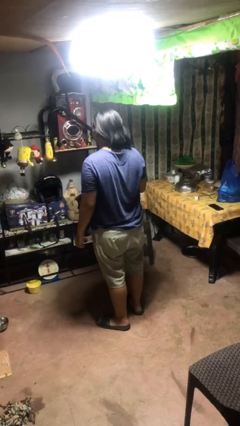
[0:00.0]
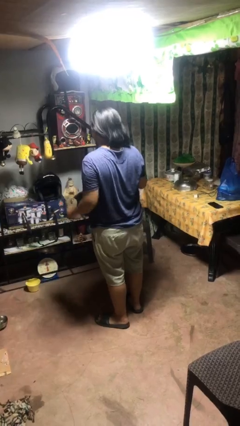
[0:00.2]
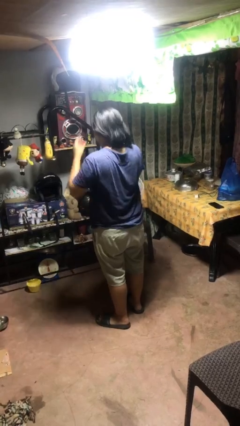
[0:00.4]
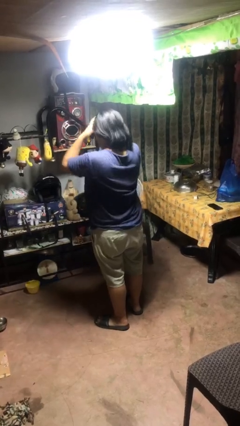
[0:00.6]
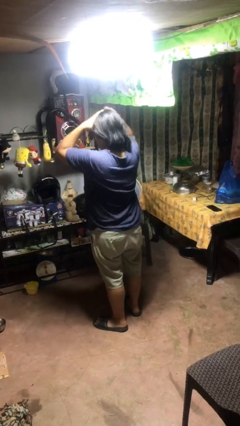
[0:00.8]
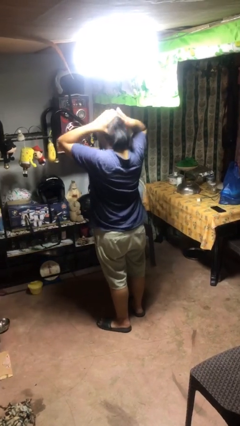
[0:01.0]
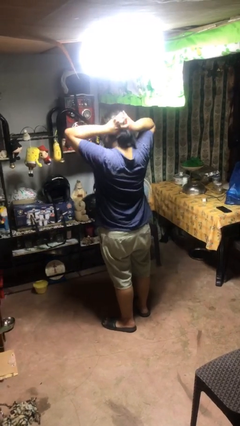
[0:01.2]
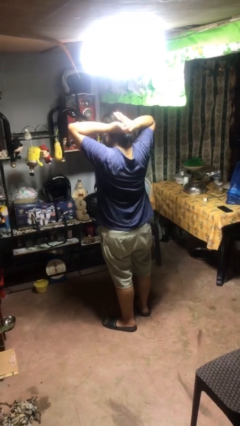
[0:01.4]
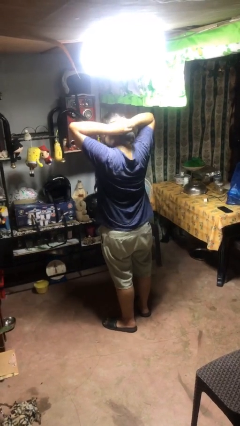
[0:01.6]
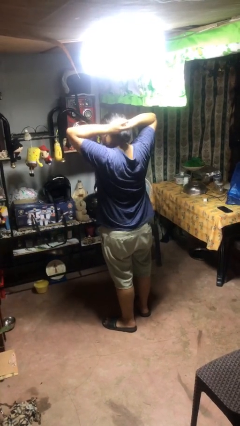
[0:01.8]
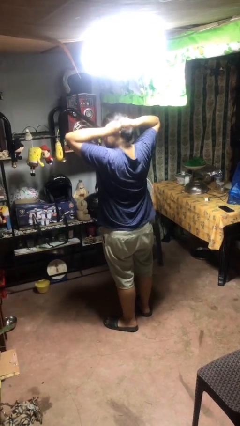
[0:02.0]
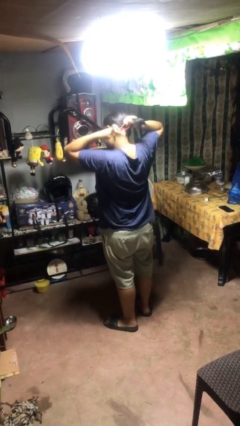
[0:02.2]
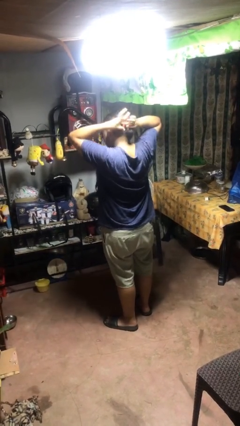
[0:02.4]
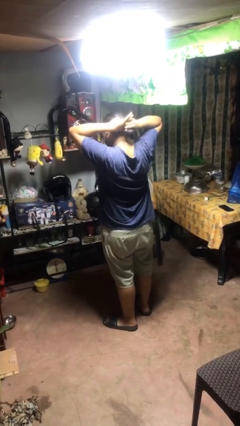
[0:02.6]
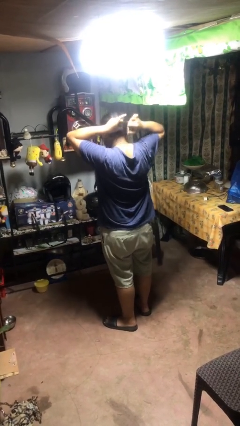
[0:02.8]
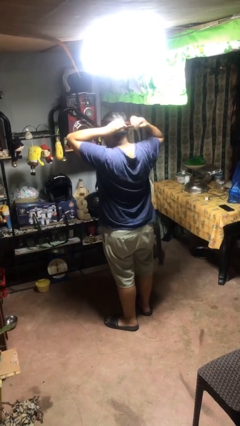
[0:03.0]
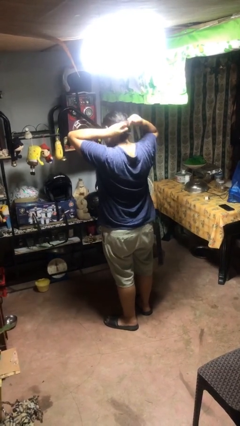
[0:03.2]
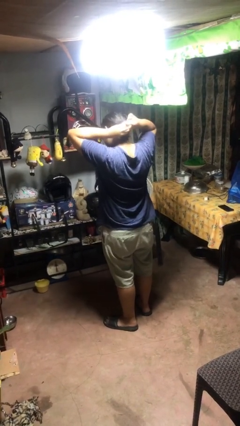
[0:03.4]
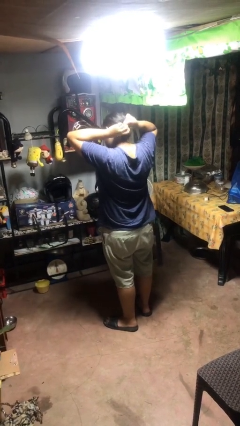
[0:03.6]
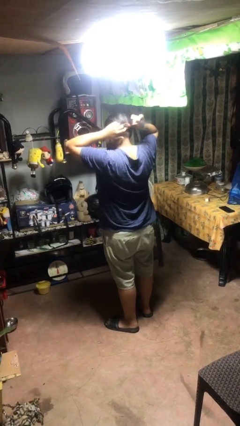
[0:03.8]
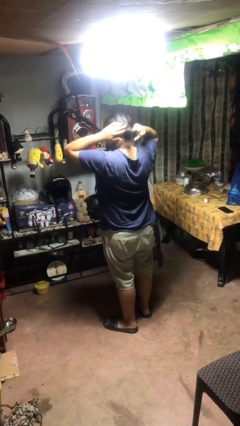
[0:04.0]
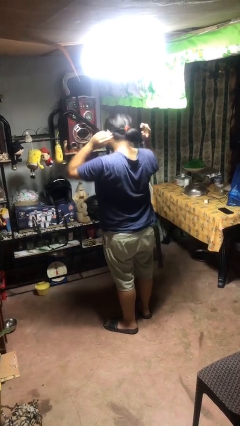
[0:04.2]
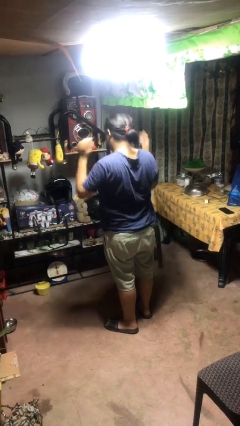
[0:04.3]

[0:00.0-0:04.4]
person puts hair in ponytail

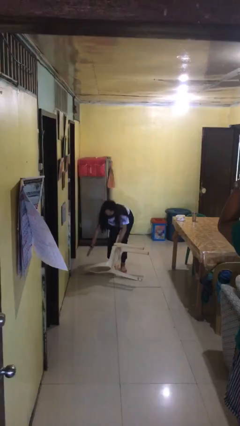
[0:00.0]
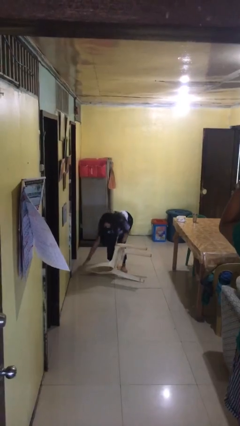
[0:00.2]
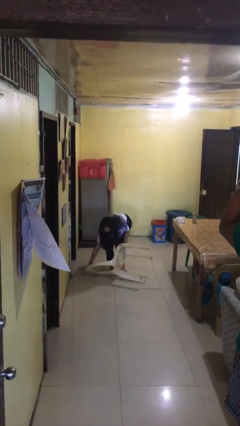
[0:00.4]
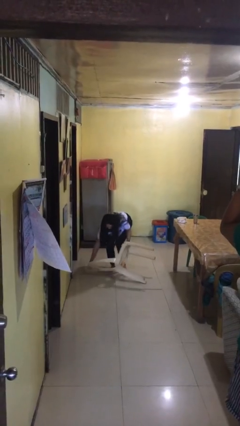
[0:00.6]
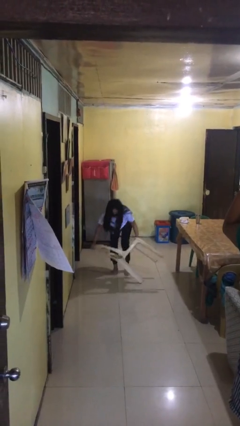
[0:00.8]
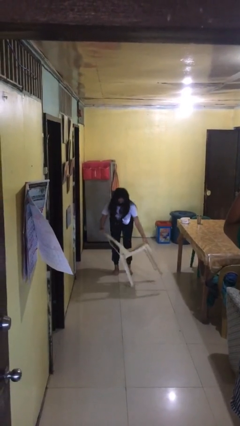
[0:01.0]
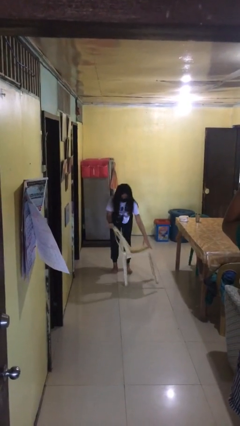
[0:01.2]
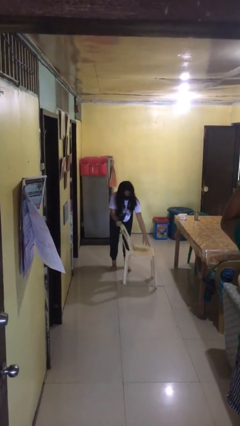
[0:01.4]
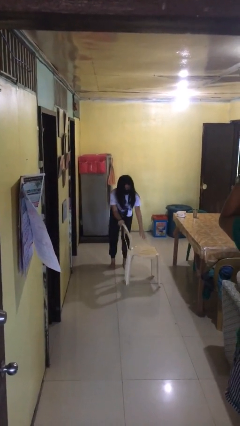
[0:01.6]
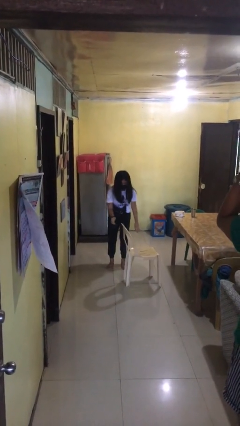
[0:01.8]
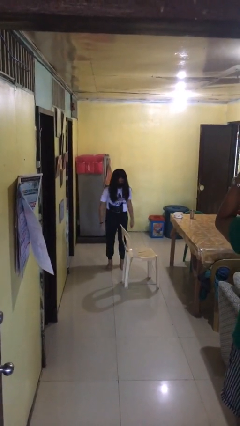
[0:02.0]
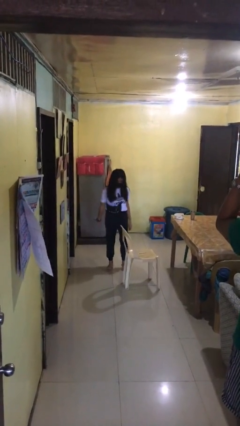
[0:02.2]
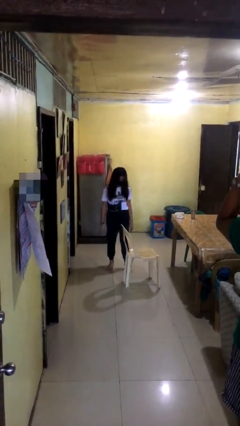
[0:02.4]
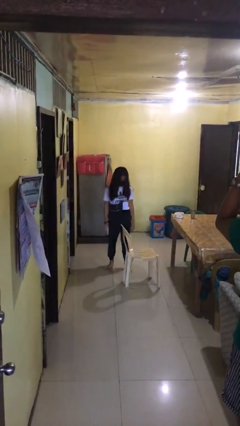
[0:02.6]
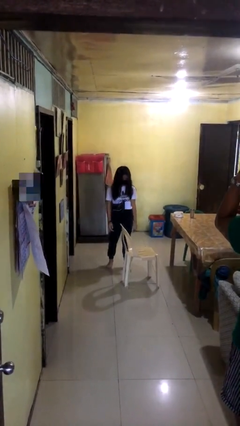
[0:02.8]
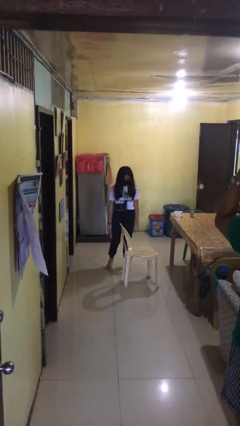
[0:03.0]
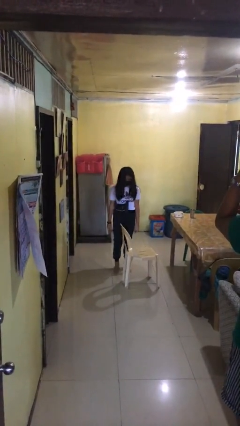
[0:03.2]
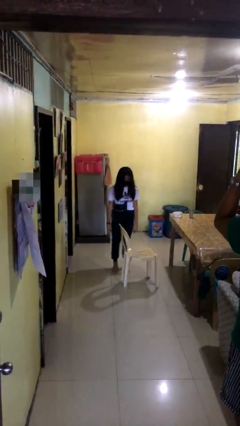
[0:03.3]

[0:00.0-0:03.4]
person sets upright furniture

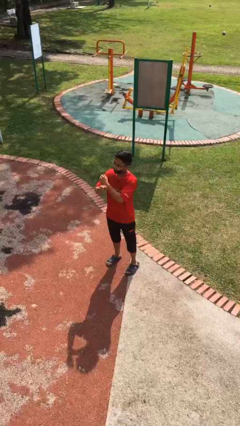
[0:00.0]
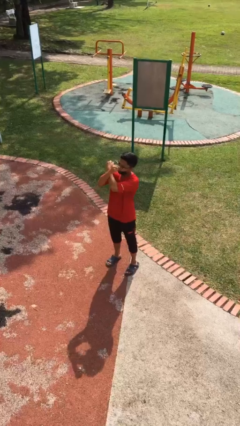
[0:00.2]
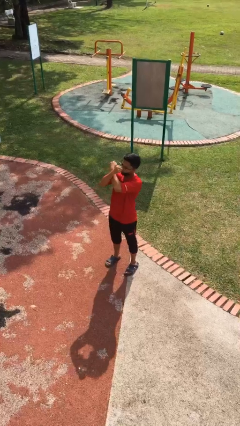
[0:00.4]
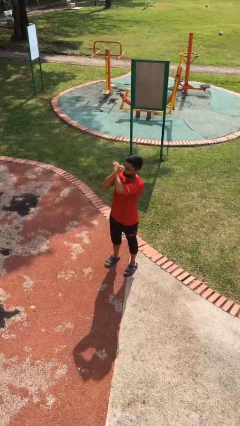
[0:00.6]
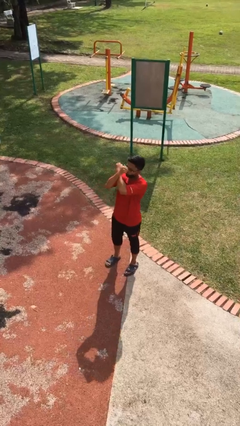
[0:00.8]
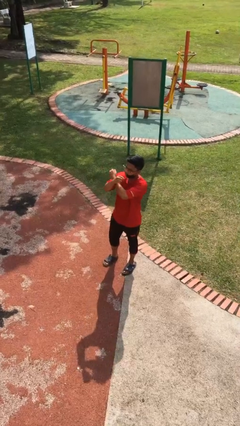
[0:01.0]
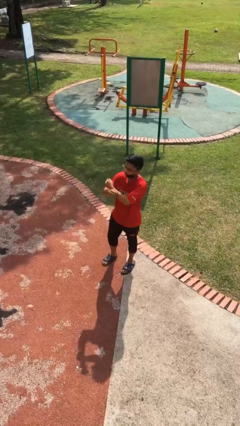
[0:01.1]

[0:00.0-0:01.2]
person gestures arms x

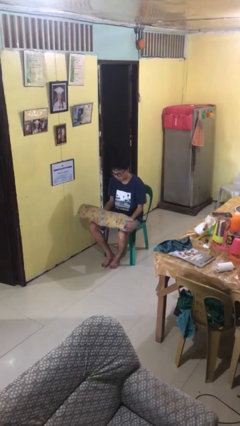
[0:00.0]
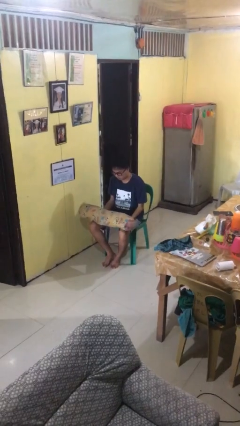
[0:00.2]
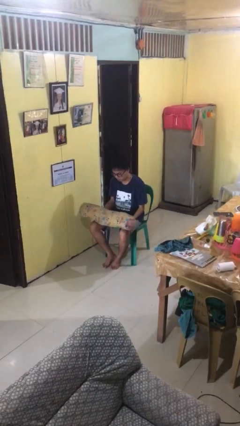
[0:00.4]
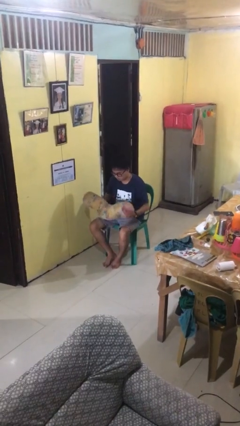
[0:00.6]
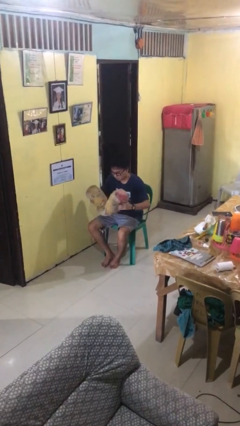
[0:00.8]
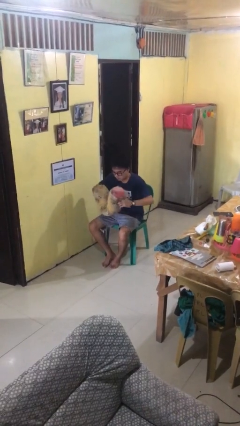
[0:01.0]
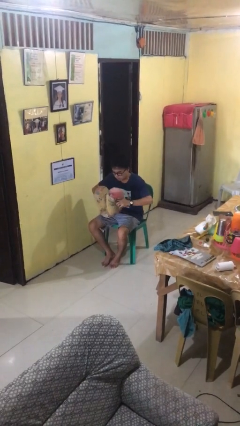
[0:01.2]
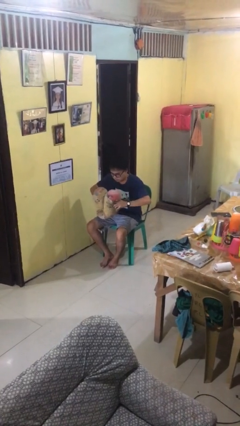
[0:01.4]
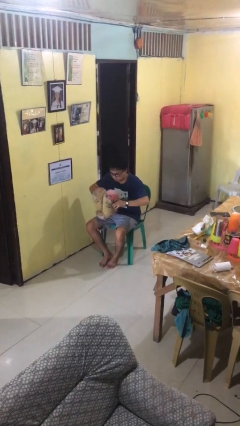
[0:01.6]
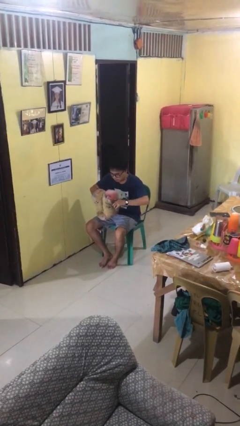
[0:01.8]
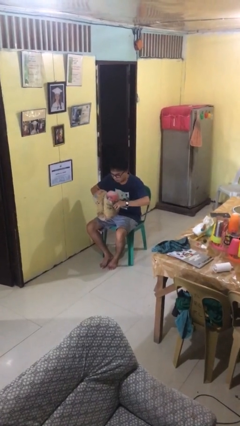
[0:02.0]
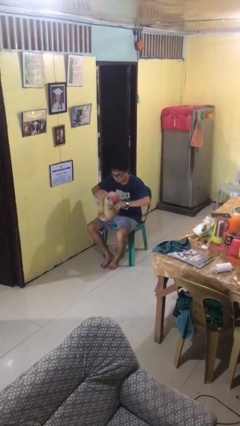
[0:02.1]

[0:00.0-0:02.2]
person squeezes object

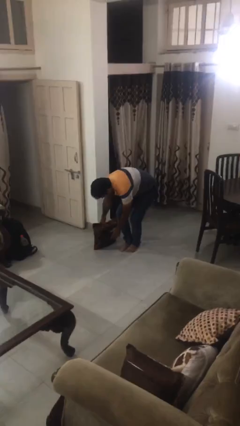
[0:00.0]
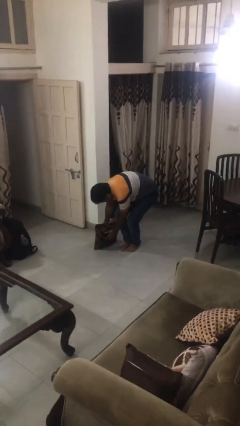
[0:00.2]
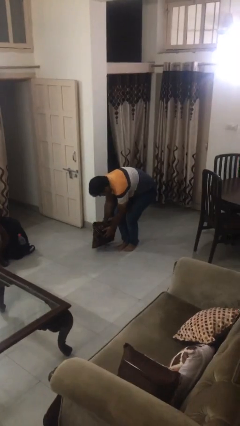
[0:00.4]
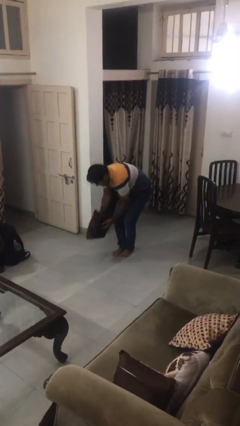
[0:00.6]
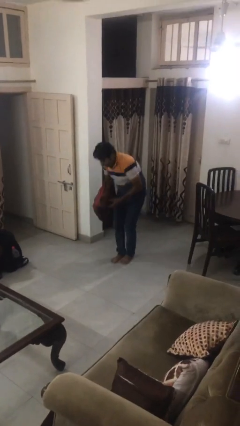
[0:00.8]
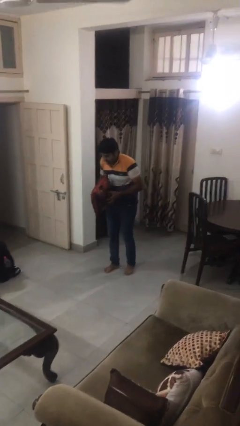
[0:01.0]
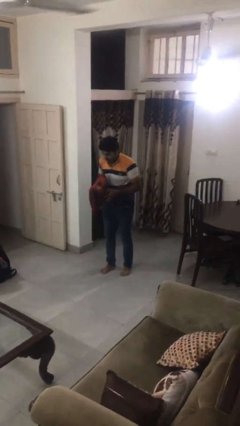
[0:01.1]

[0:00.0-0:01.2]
person picks up object from floor

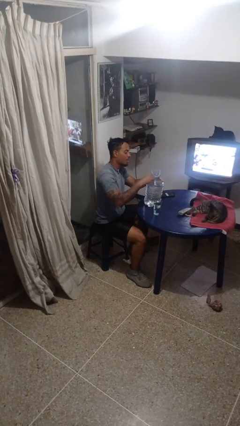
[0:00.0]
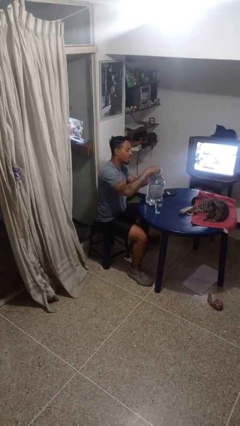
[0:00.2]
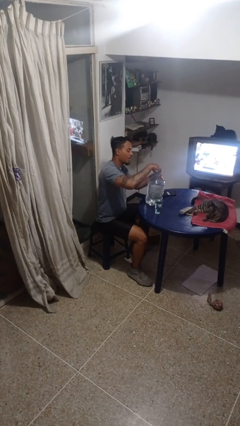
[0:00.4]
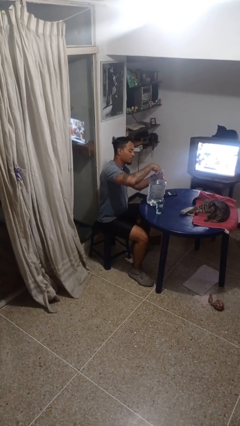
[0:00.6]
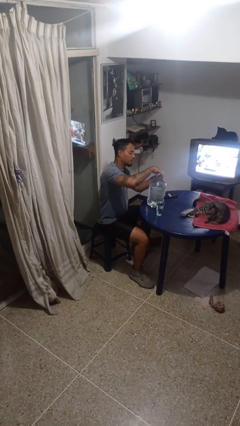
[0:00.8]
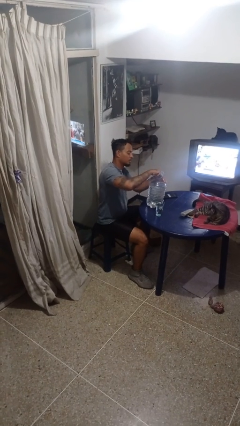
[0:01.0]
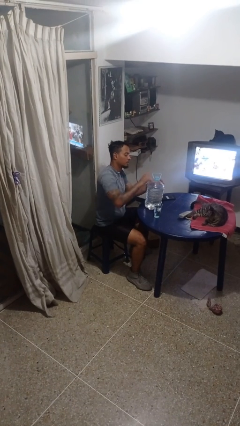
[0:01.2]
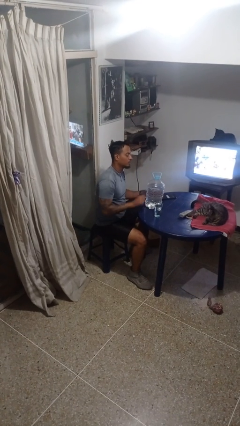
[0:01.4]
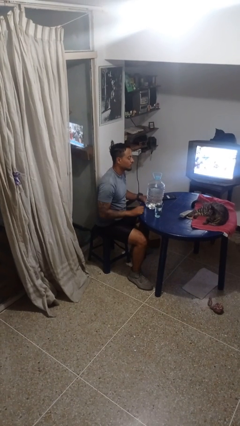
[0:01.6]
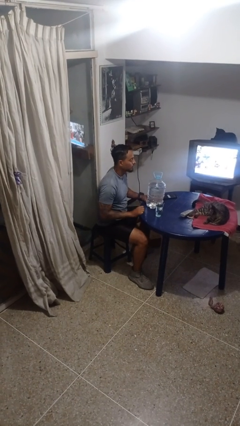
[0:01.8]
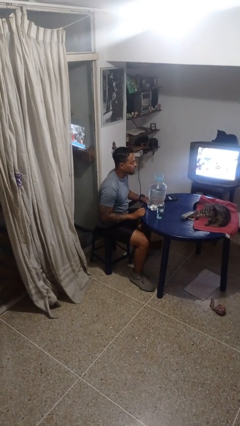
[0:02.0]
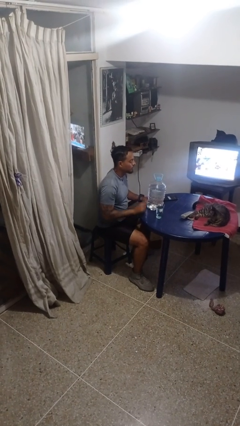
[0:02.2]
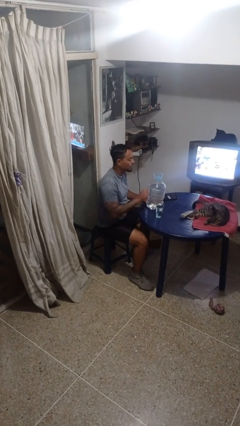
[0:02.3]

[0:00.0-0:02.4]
person screws lid to bottle

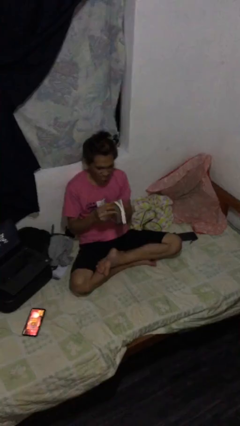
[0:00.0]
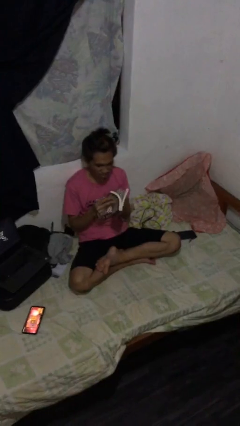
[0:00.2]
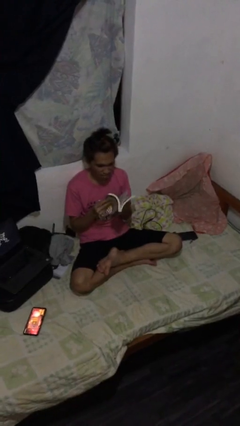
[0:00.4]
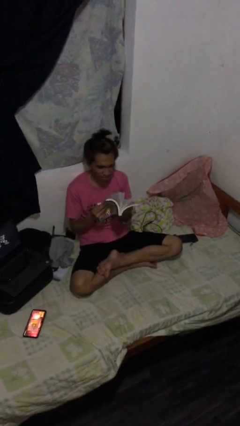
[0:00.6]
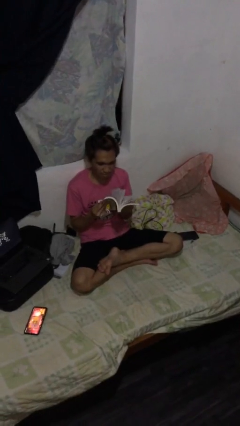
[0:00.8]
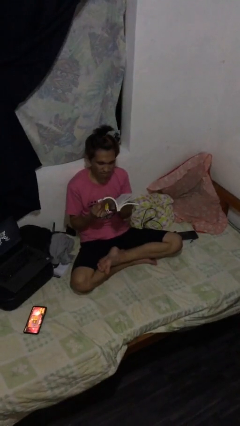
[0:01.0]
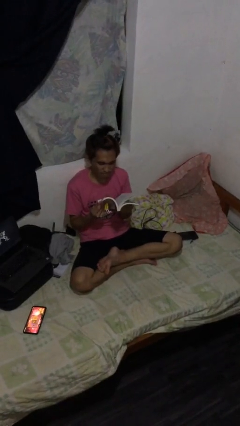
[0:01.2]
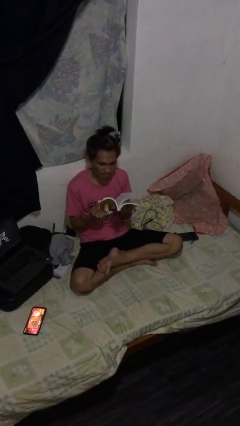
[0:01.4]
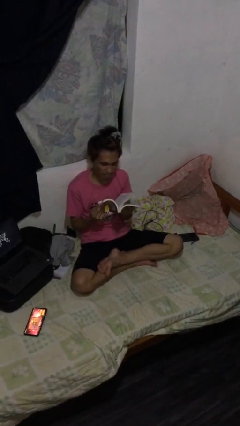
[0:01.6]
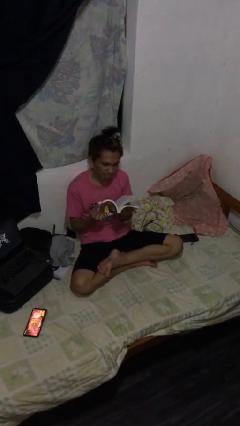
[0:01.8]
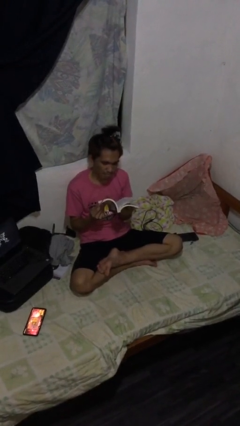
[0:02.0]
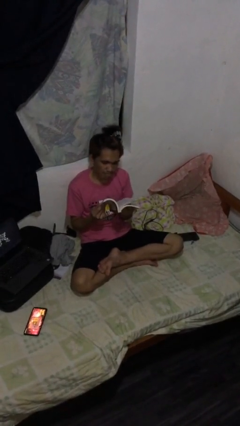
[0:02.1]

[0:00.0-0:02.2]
person reads document

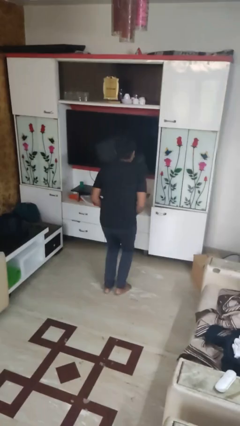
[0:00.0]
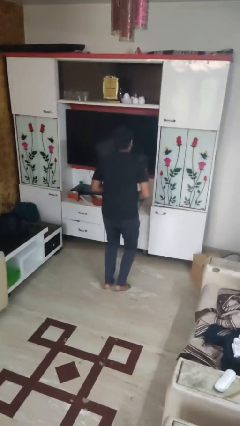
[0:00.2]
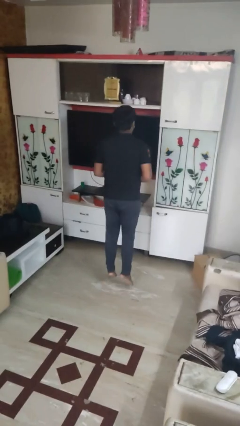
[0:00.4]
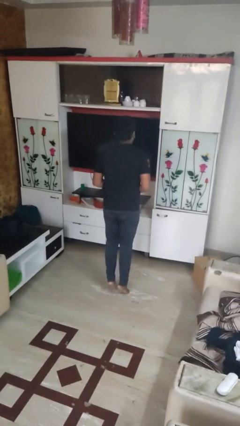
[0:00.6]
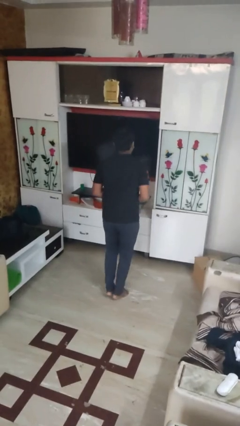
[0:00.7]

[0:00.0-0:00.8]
person jumps
